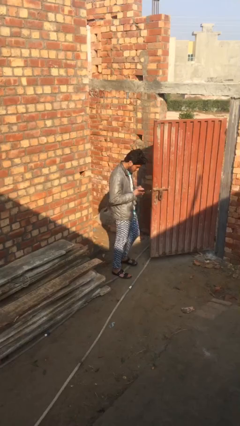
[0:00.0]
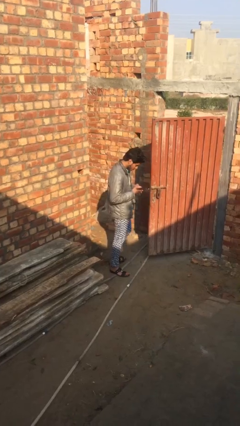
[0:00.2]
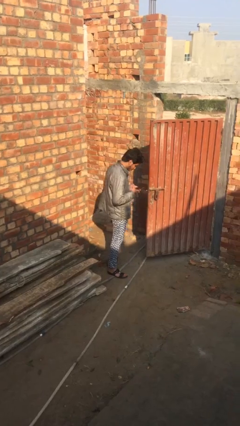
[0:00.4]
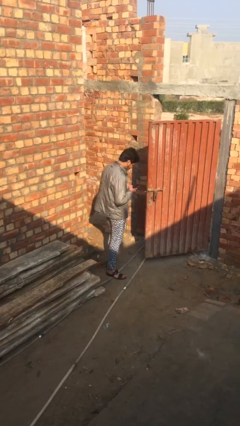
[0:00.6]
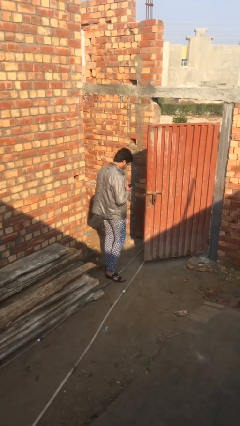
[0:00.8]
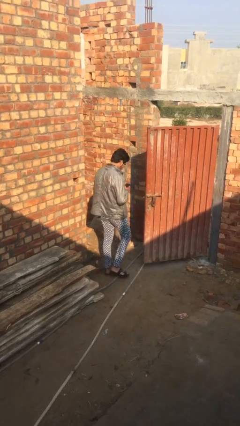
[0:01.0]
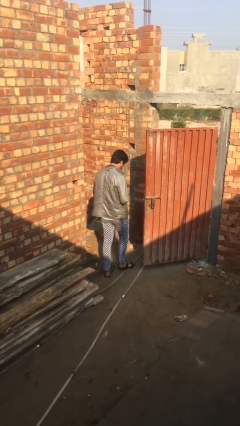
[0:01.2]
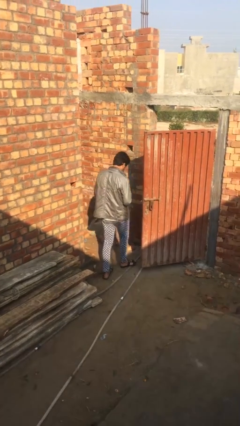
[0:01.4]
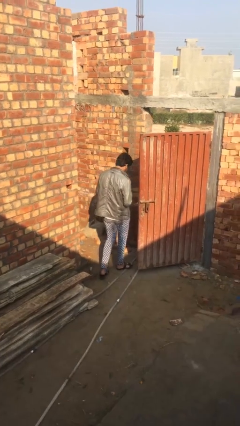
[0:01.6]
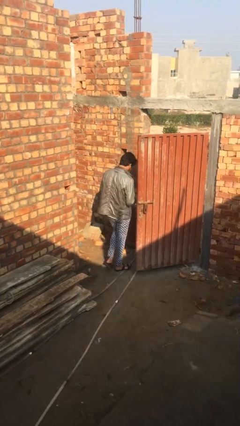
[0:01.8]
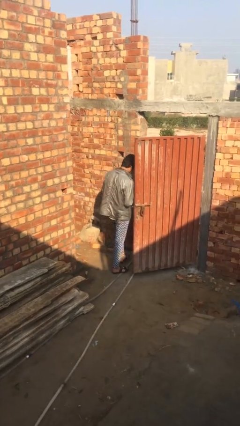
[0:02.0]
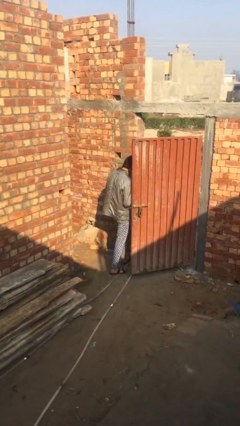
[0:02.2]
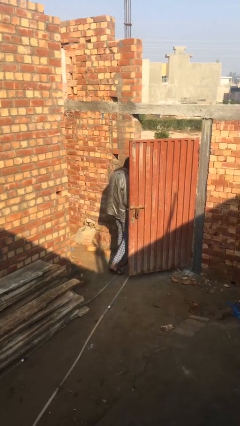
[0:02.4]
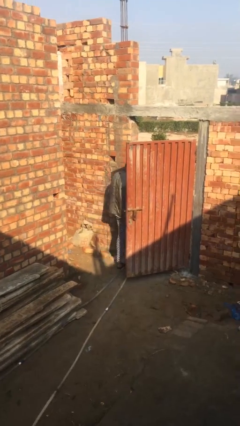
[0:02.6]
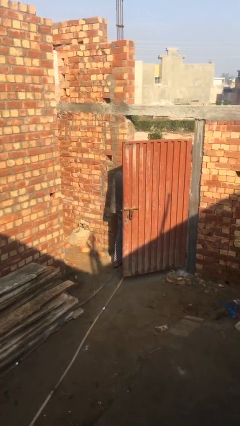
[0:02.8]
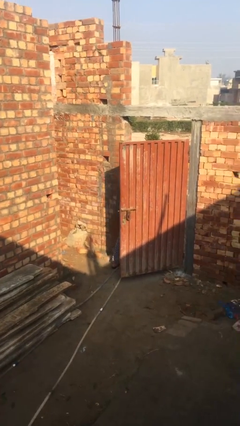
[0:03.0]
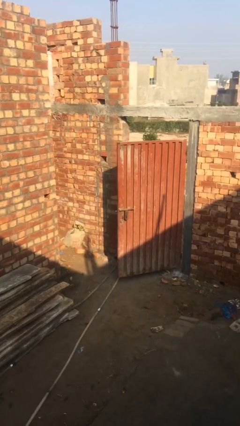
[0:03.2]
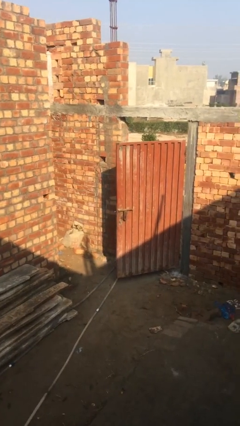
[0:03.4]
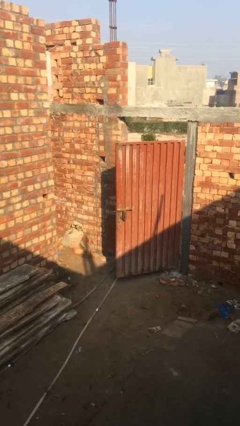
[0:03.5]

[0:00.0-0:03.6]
person exits scene through structure

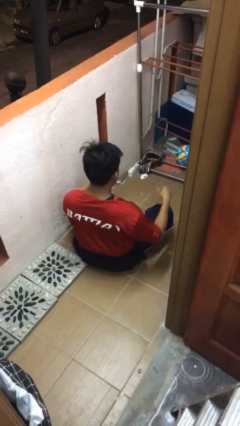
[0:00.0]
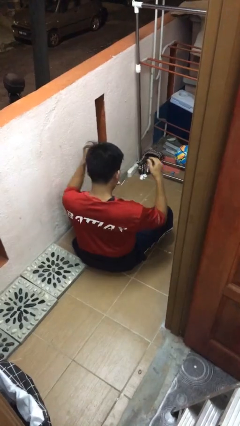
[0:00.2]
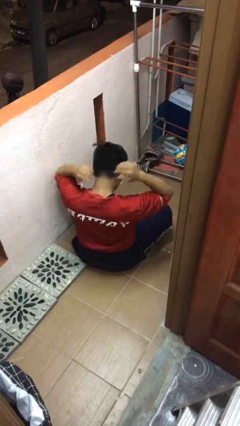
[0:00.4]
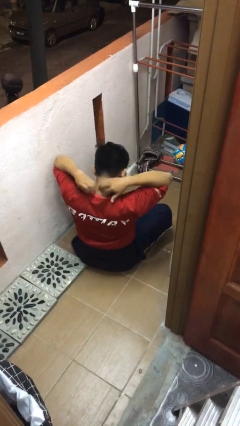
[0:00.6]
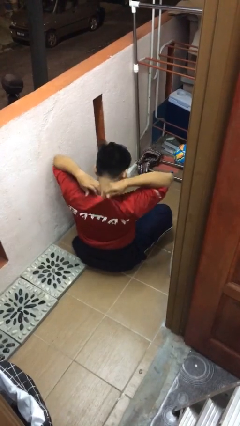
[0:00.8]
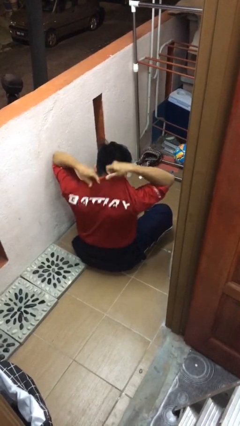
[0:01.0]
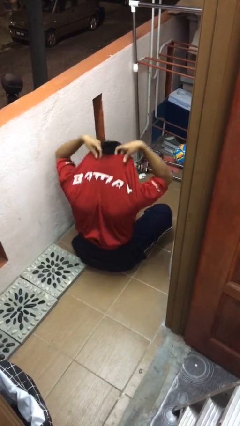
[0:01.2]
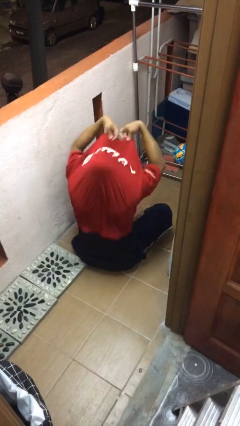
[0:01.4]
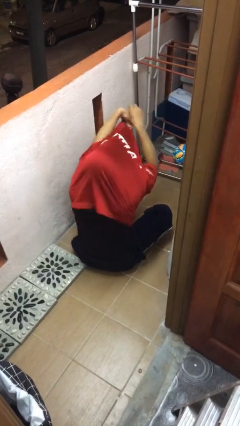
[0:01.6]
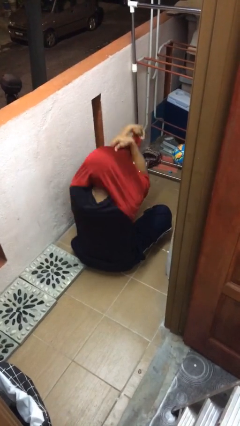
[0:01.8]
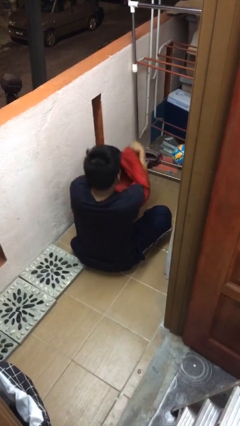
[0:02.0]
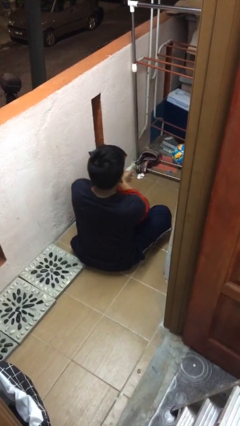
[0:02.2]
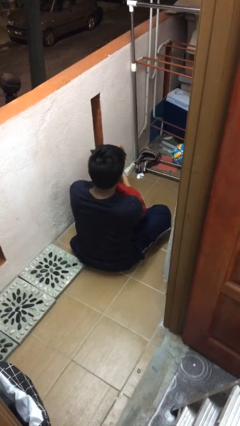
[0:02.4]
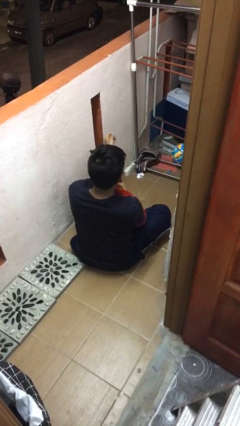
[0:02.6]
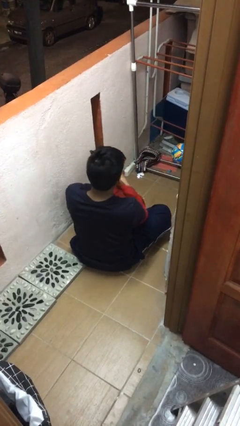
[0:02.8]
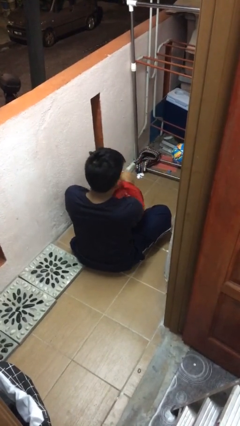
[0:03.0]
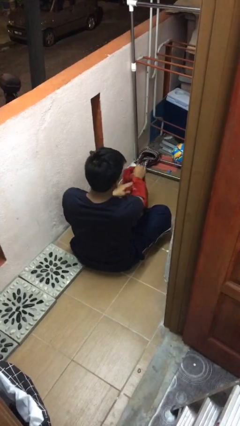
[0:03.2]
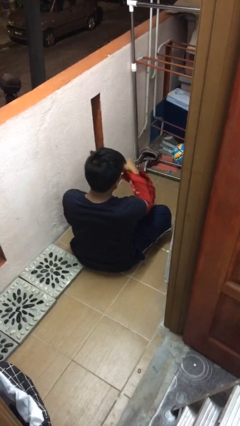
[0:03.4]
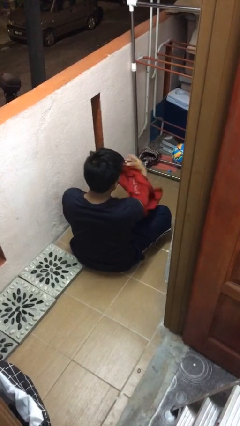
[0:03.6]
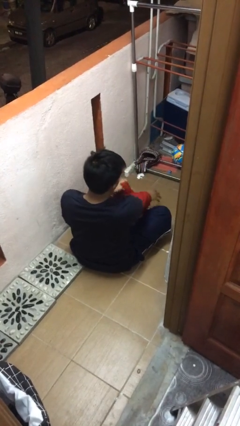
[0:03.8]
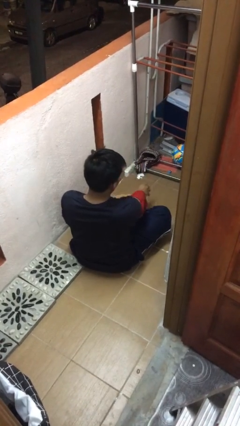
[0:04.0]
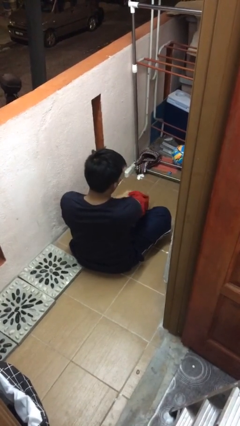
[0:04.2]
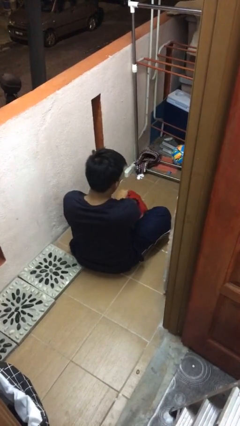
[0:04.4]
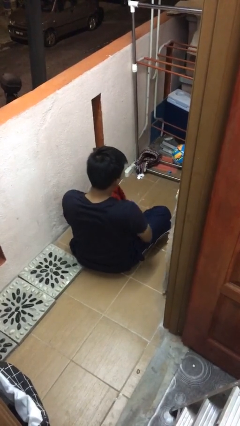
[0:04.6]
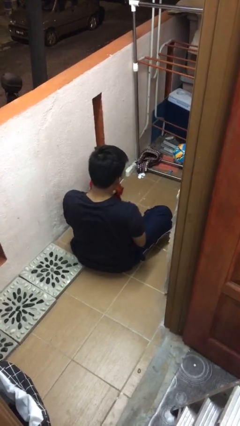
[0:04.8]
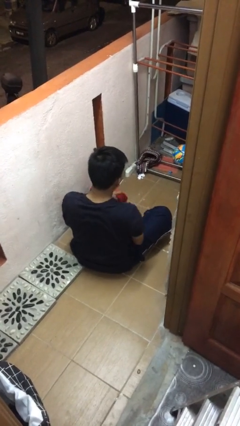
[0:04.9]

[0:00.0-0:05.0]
person takes off shirt

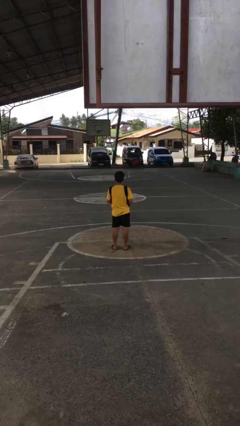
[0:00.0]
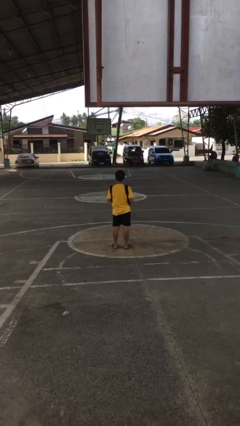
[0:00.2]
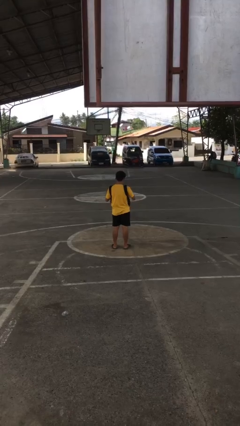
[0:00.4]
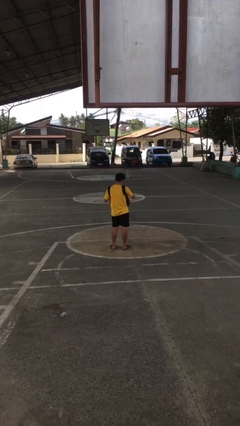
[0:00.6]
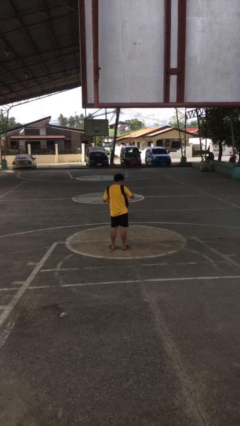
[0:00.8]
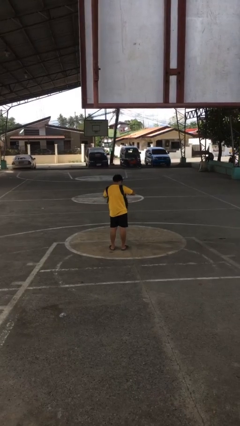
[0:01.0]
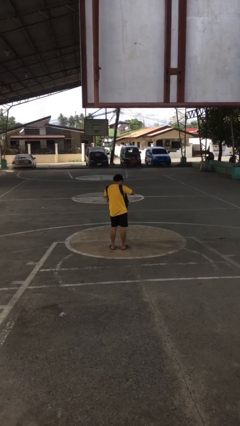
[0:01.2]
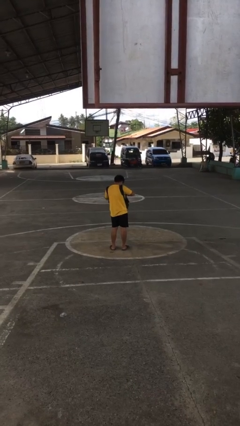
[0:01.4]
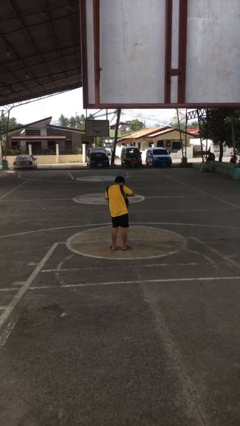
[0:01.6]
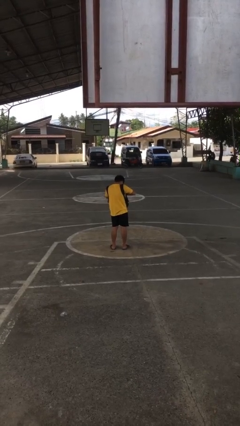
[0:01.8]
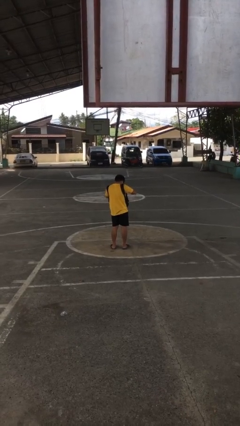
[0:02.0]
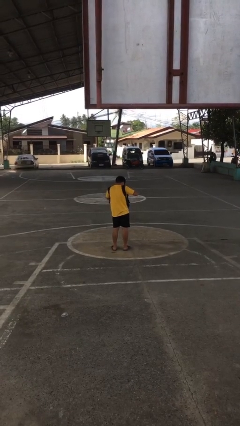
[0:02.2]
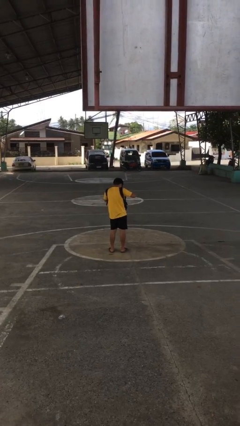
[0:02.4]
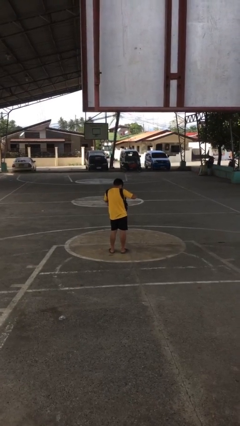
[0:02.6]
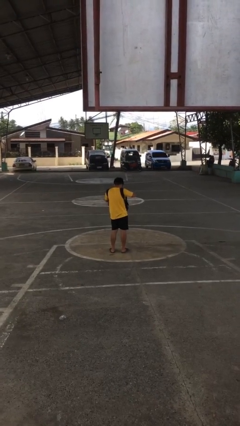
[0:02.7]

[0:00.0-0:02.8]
person searches in backpack

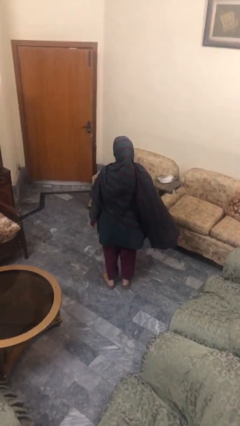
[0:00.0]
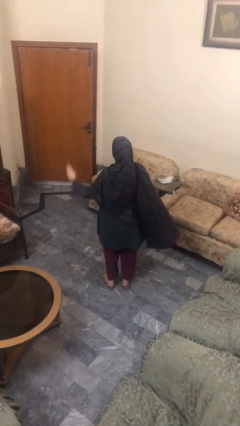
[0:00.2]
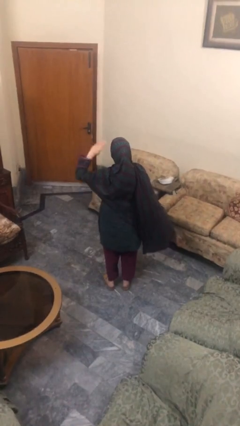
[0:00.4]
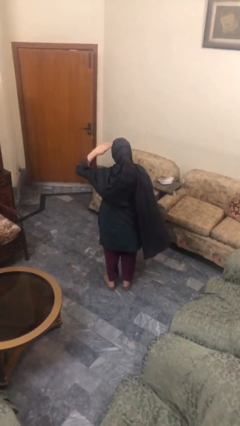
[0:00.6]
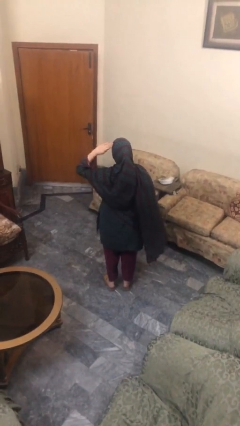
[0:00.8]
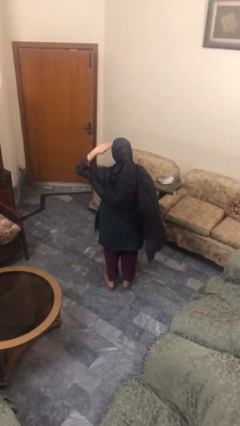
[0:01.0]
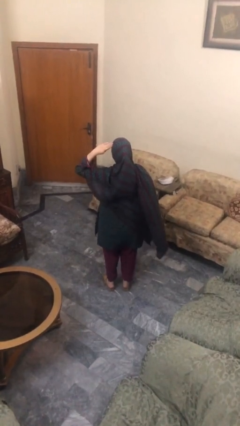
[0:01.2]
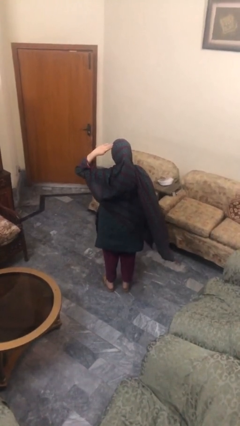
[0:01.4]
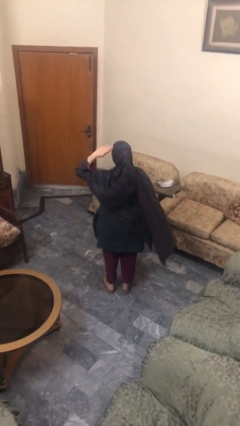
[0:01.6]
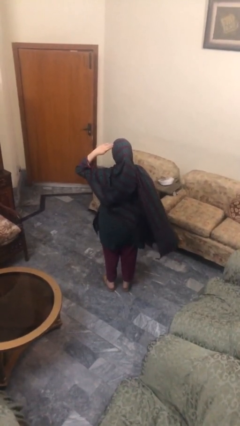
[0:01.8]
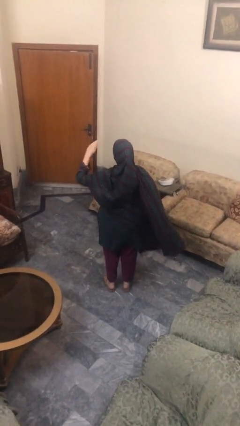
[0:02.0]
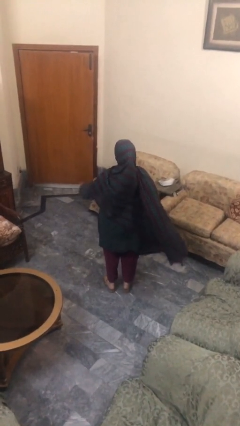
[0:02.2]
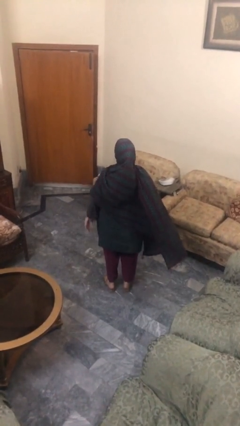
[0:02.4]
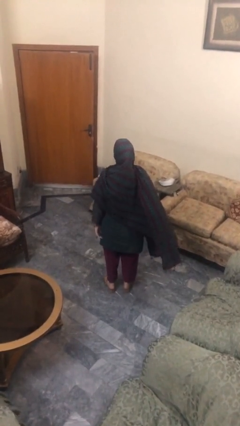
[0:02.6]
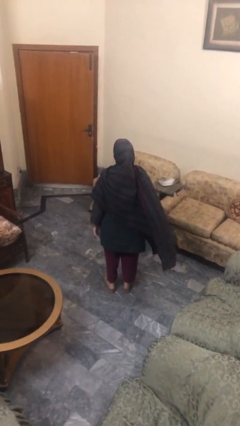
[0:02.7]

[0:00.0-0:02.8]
person salutes

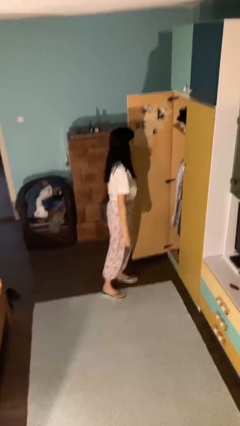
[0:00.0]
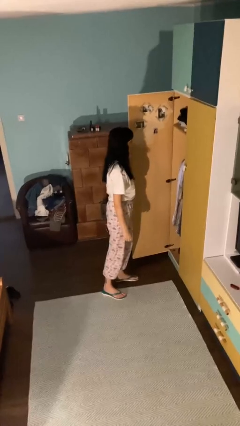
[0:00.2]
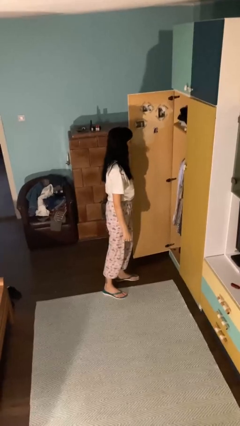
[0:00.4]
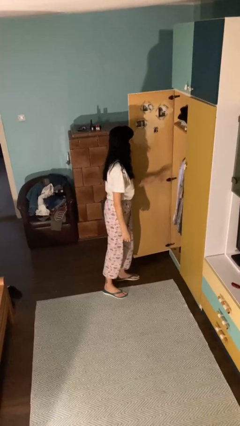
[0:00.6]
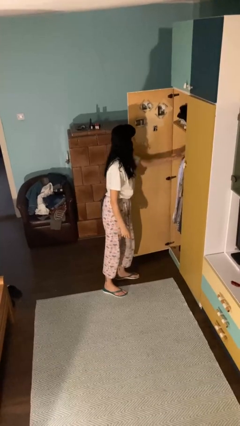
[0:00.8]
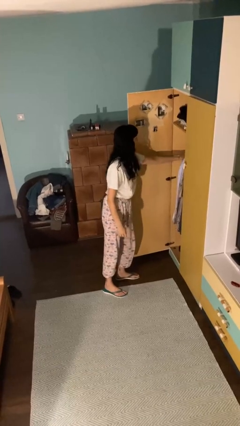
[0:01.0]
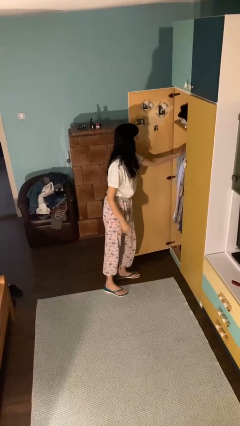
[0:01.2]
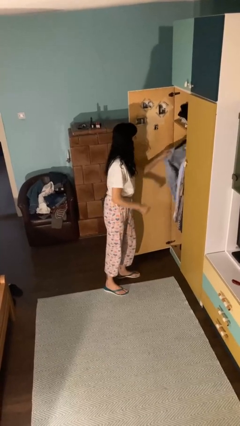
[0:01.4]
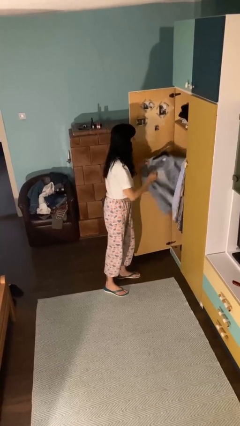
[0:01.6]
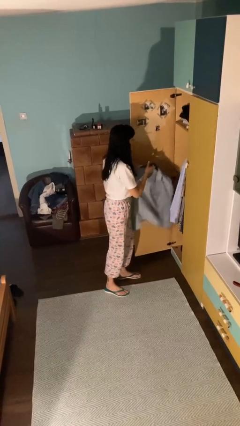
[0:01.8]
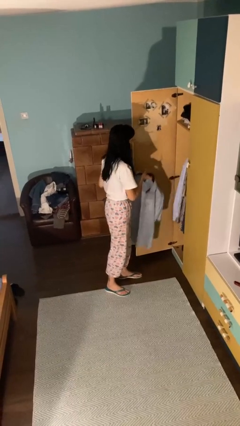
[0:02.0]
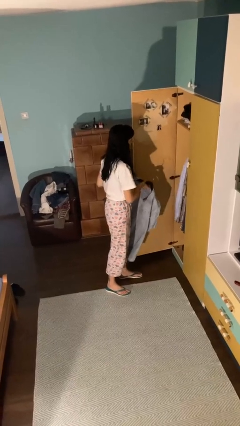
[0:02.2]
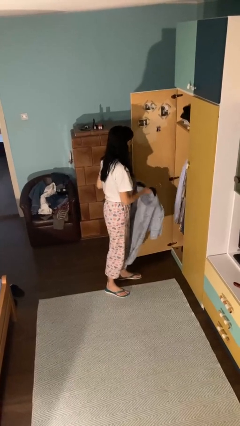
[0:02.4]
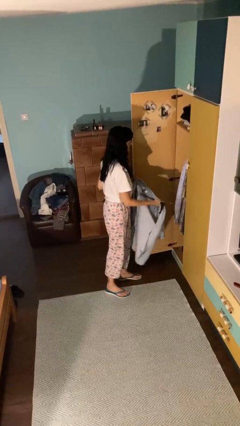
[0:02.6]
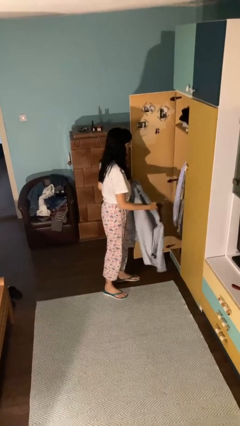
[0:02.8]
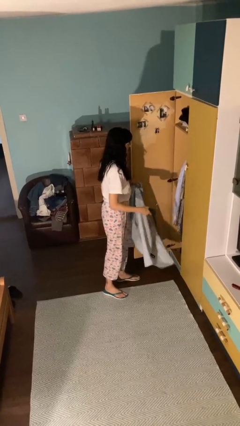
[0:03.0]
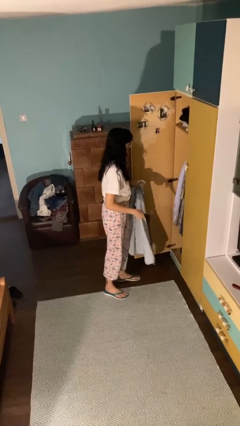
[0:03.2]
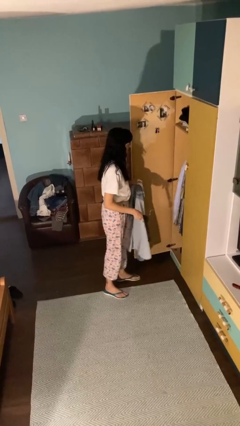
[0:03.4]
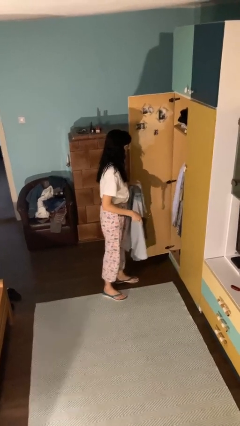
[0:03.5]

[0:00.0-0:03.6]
person takes clothes from closet
